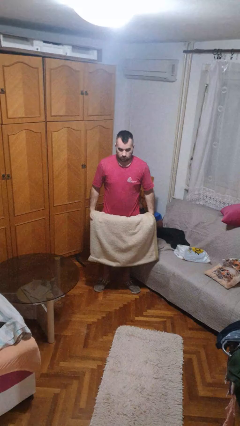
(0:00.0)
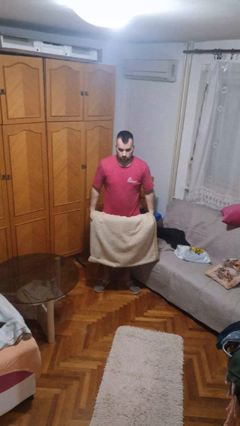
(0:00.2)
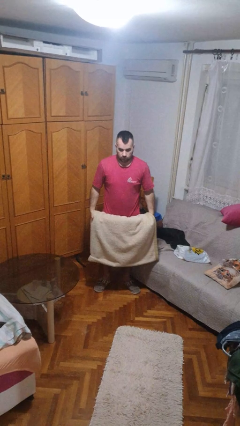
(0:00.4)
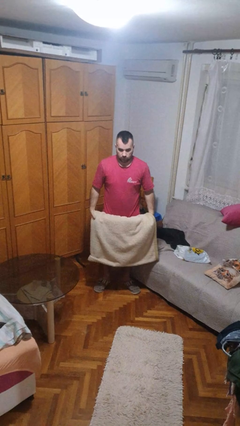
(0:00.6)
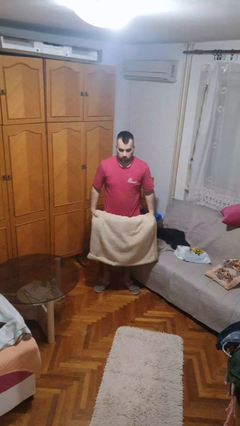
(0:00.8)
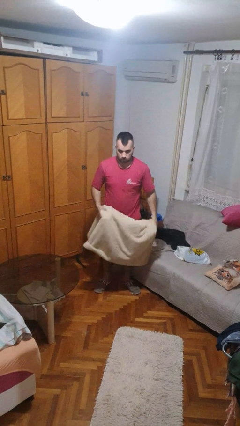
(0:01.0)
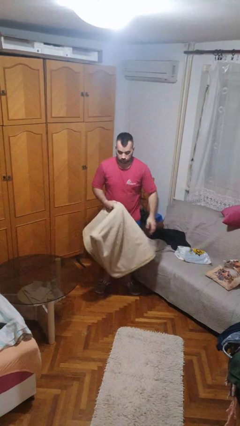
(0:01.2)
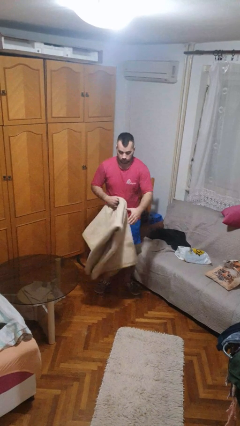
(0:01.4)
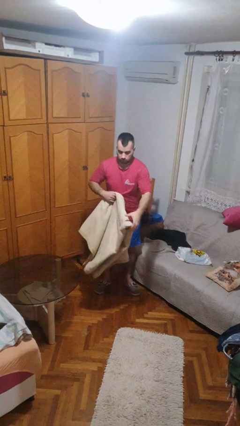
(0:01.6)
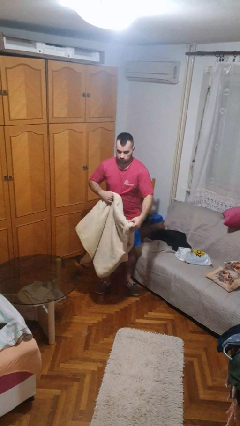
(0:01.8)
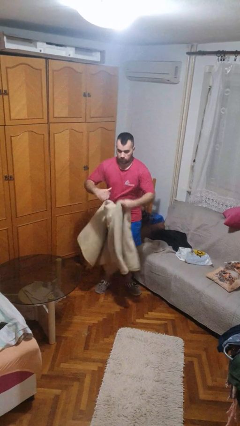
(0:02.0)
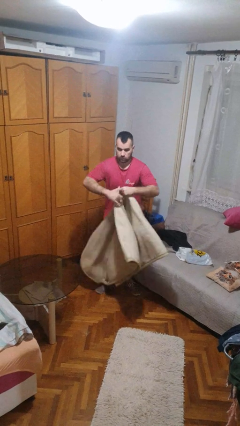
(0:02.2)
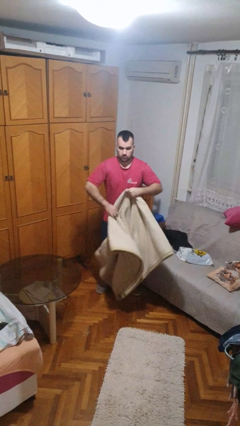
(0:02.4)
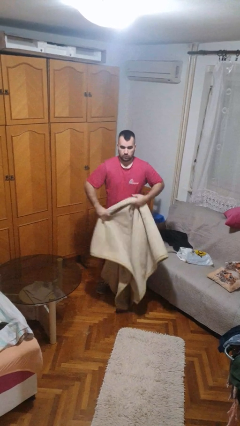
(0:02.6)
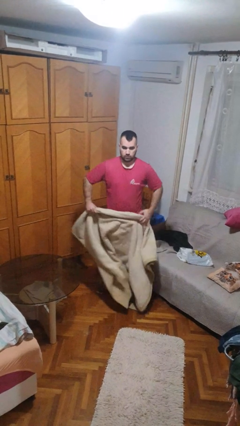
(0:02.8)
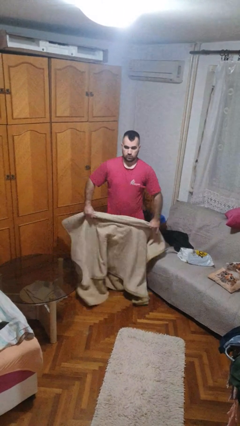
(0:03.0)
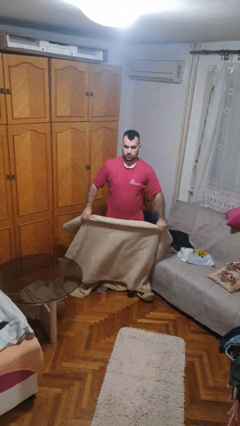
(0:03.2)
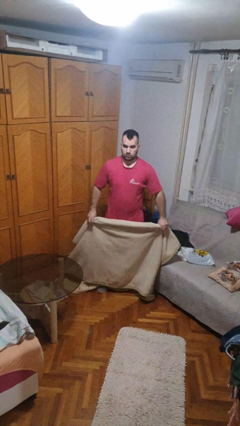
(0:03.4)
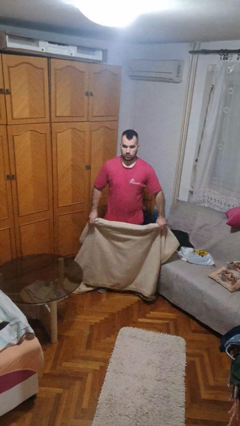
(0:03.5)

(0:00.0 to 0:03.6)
person unfolds blanket

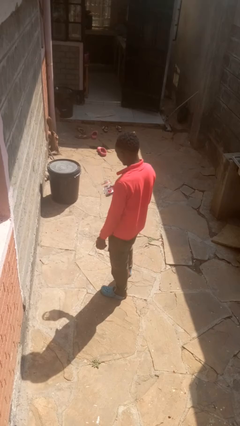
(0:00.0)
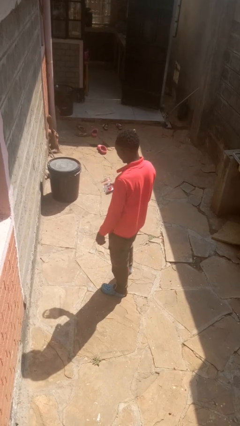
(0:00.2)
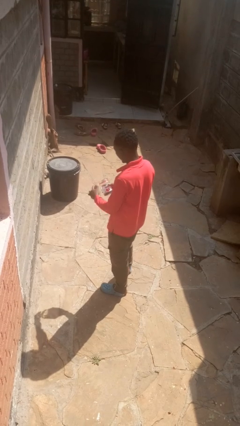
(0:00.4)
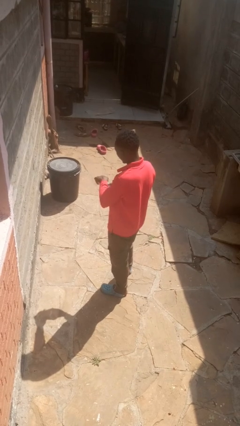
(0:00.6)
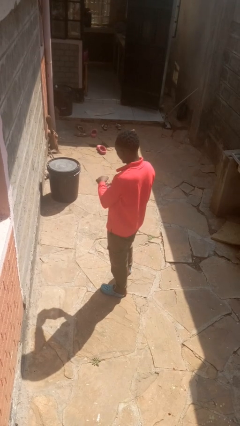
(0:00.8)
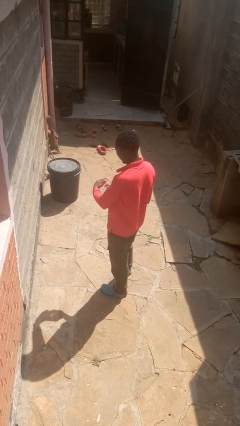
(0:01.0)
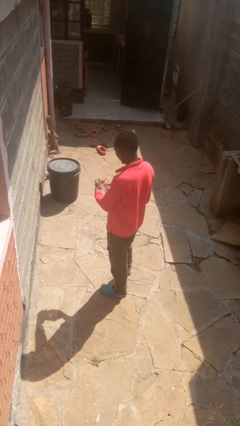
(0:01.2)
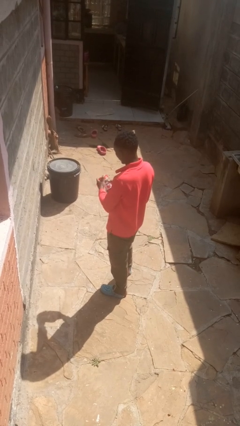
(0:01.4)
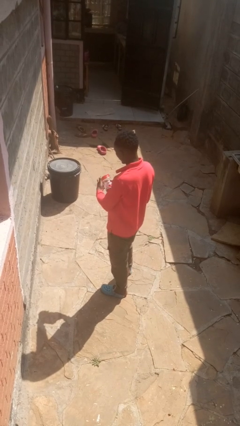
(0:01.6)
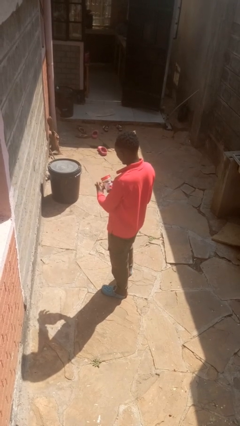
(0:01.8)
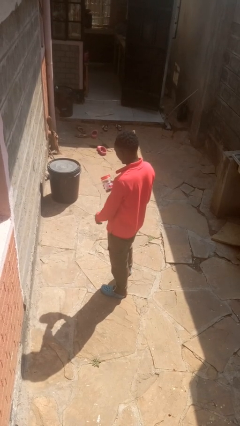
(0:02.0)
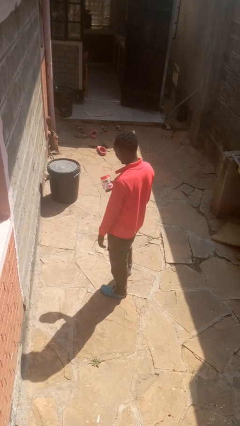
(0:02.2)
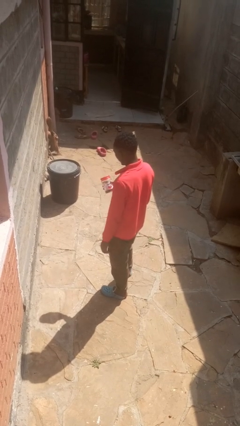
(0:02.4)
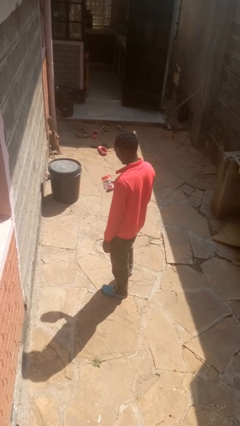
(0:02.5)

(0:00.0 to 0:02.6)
person closes jar

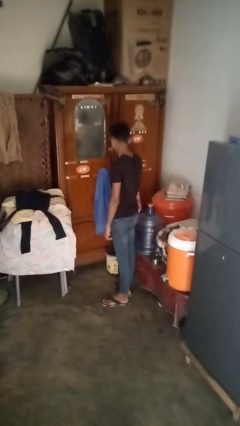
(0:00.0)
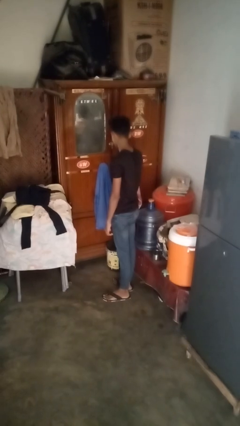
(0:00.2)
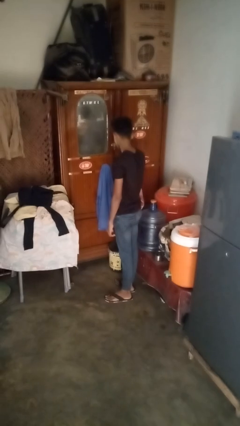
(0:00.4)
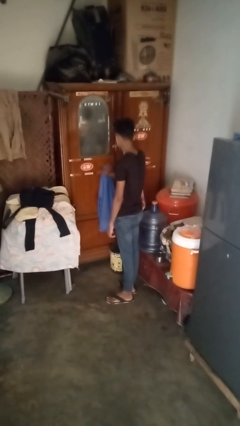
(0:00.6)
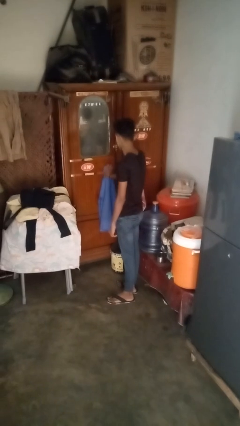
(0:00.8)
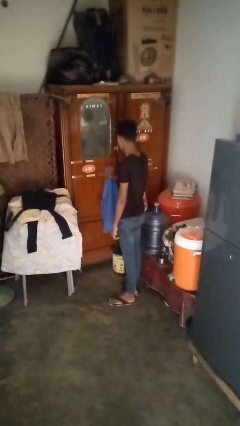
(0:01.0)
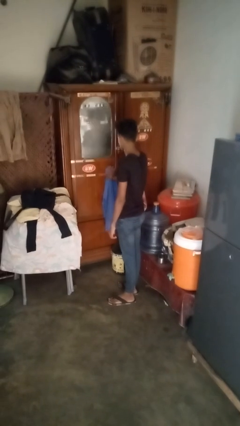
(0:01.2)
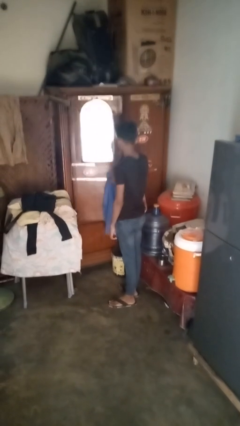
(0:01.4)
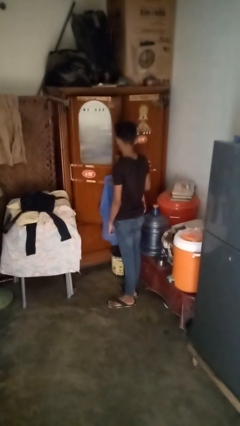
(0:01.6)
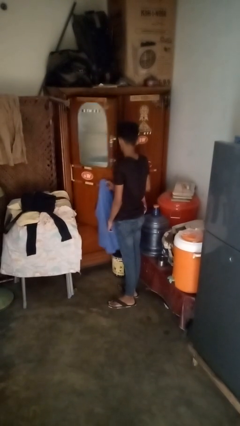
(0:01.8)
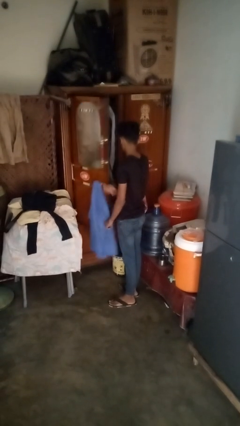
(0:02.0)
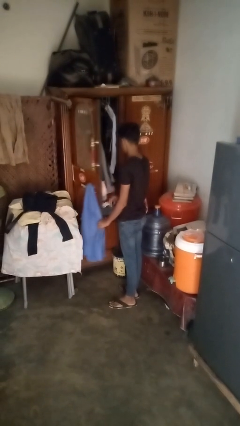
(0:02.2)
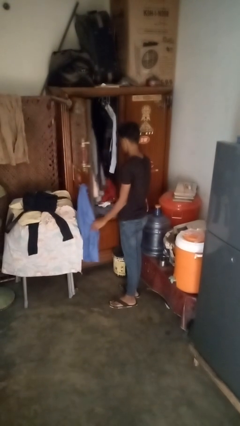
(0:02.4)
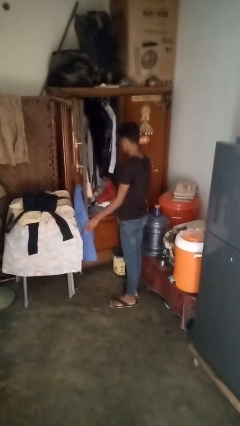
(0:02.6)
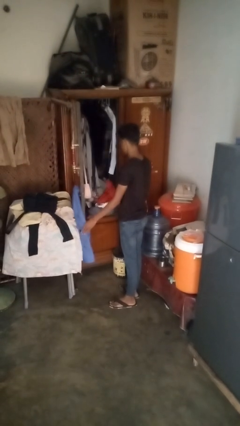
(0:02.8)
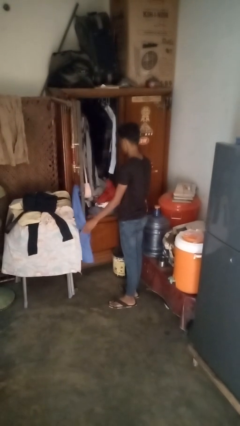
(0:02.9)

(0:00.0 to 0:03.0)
person opens dresser drawer

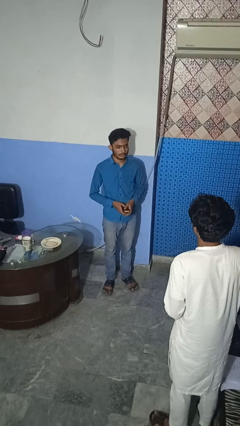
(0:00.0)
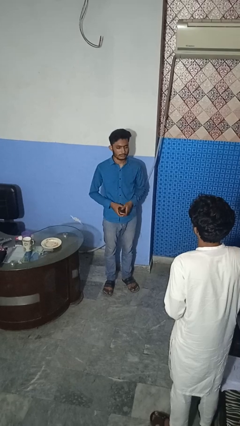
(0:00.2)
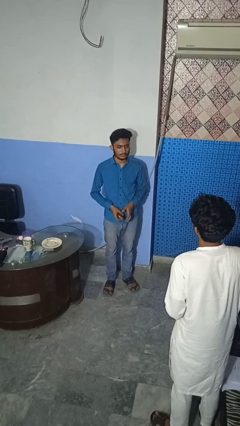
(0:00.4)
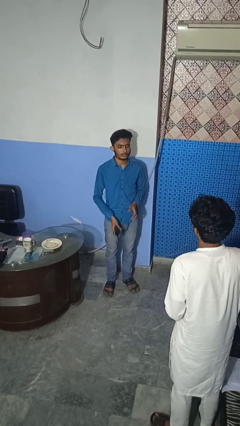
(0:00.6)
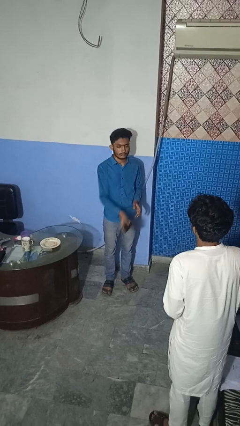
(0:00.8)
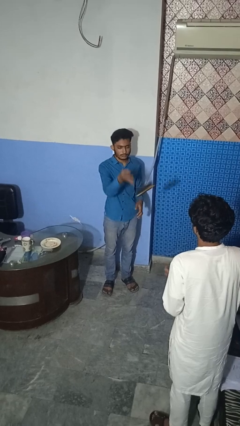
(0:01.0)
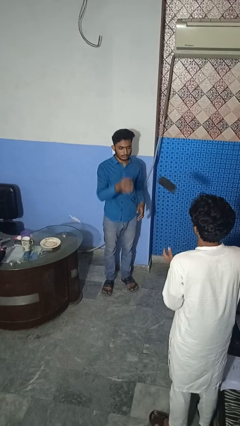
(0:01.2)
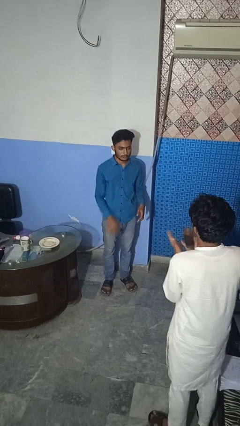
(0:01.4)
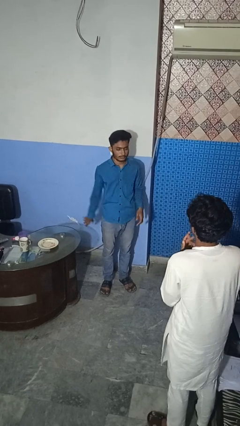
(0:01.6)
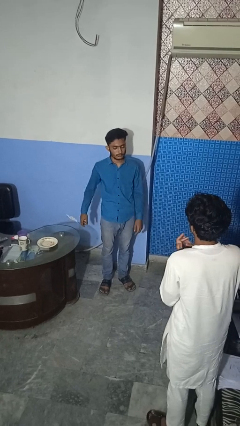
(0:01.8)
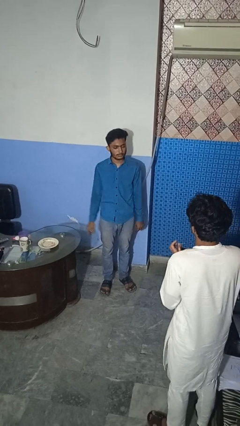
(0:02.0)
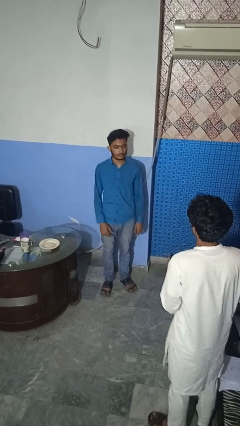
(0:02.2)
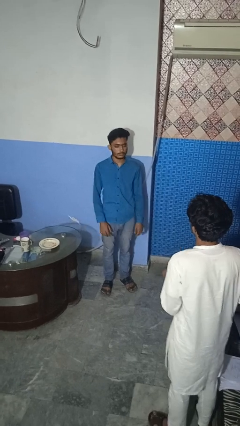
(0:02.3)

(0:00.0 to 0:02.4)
person throws object to person

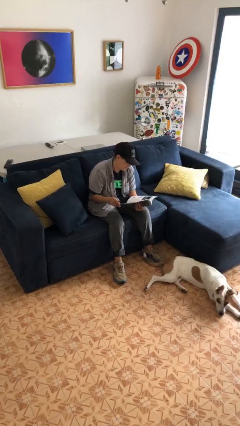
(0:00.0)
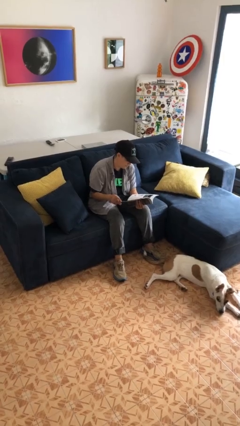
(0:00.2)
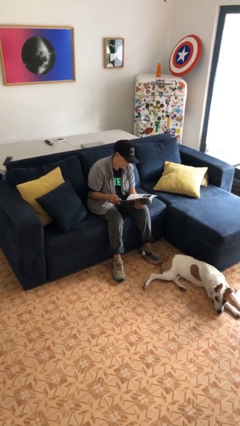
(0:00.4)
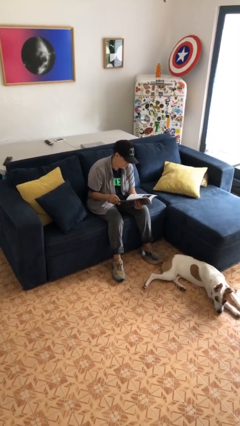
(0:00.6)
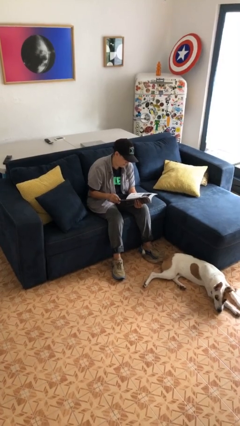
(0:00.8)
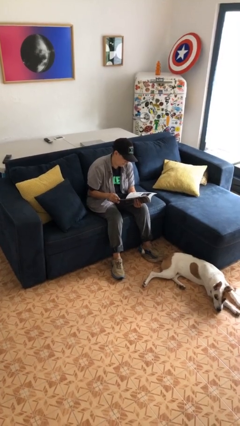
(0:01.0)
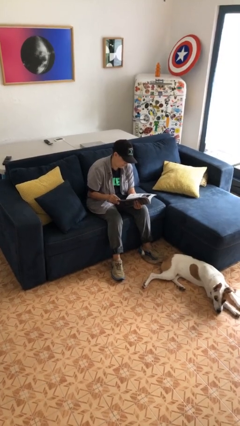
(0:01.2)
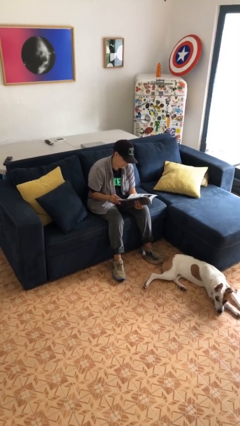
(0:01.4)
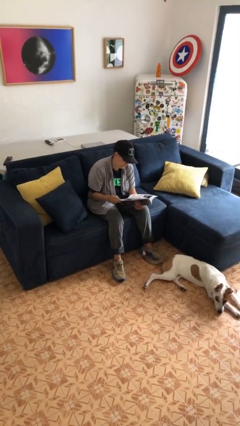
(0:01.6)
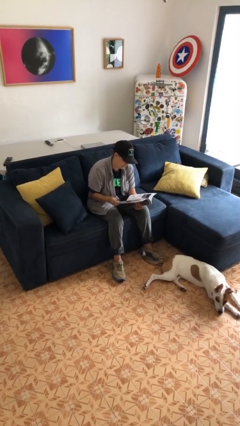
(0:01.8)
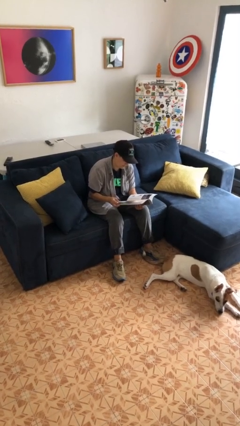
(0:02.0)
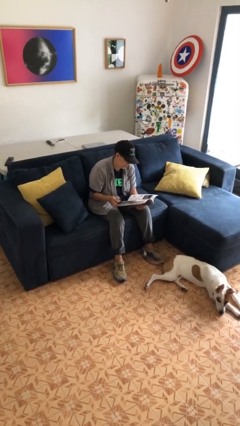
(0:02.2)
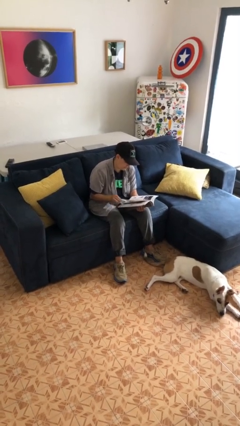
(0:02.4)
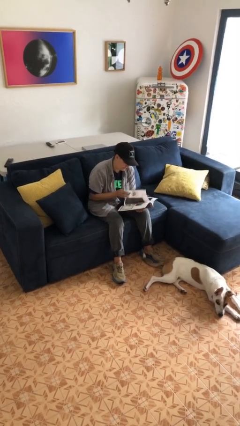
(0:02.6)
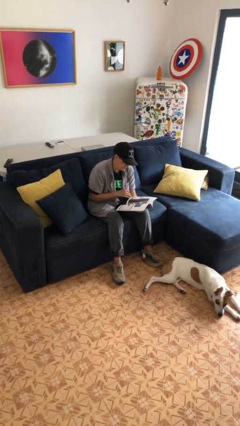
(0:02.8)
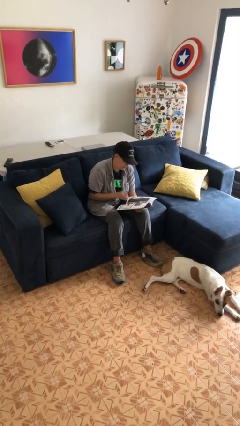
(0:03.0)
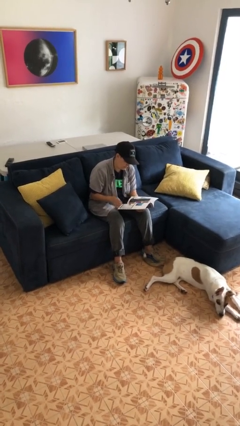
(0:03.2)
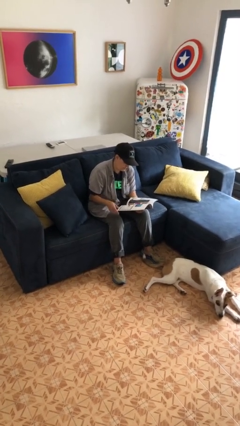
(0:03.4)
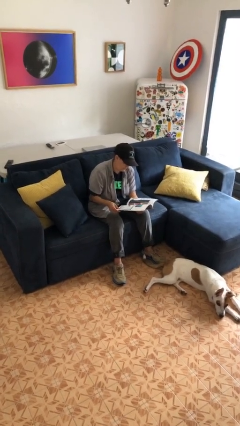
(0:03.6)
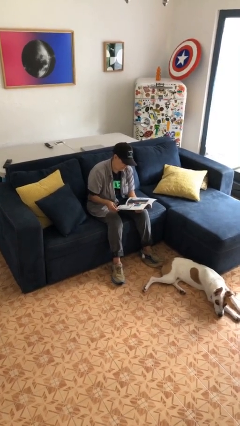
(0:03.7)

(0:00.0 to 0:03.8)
person reads magazine

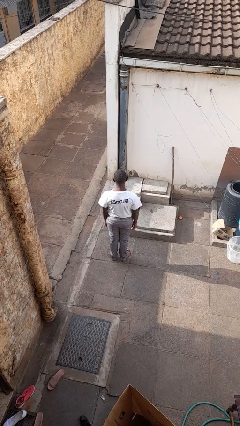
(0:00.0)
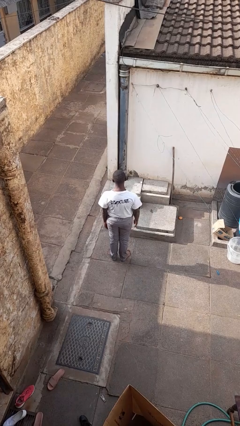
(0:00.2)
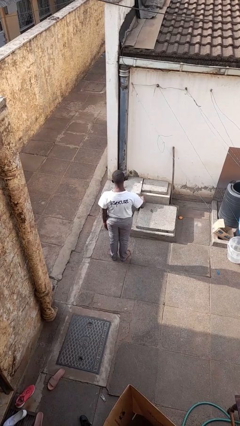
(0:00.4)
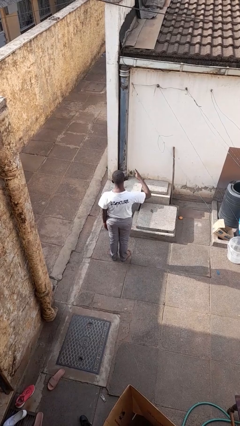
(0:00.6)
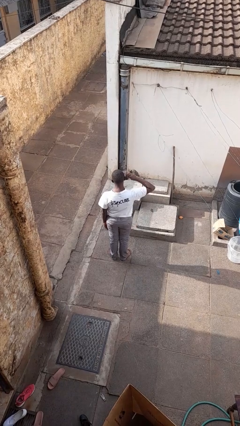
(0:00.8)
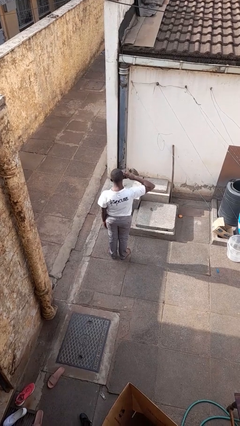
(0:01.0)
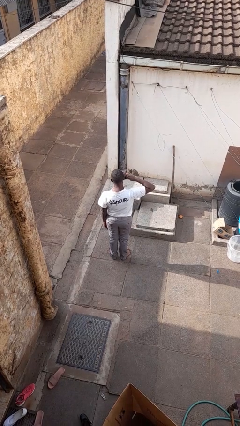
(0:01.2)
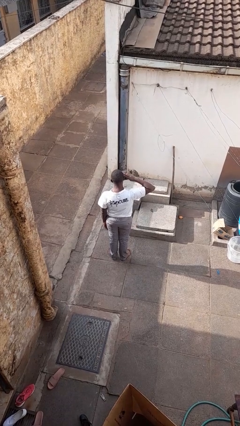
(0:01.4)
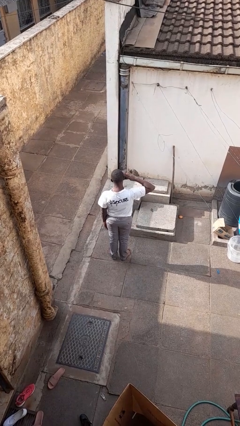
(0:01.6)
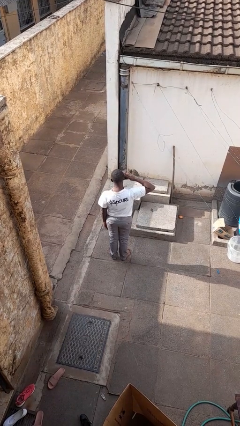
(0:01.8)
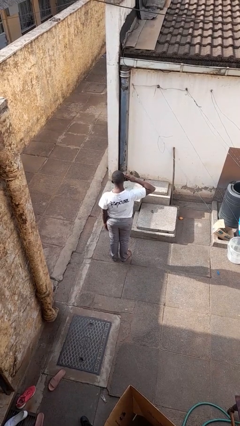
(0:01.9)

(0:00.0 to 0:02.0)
person salutes
